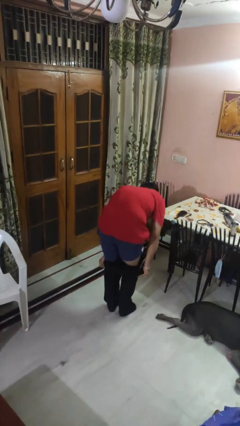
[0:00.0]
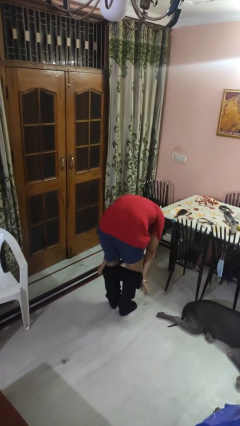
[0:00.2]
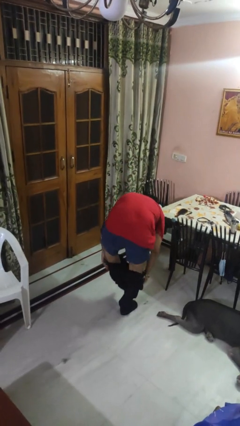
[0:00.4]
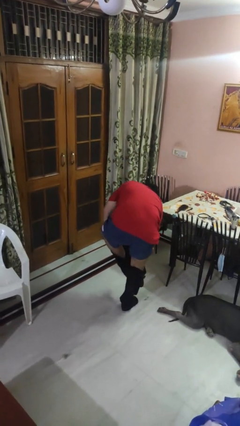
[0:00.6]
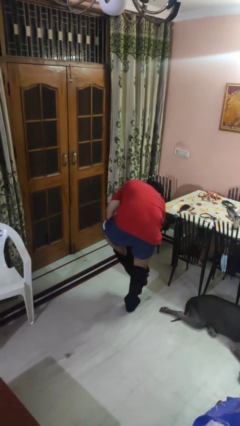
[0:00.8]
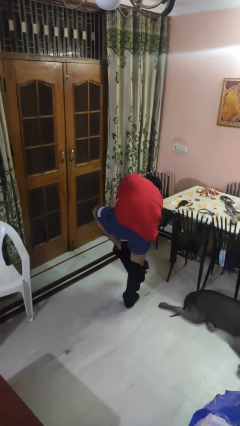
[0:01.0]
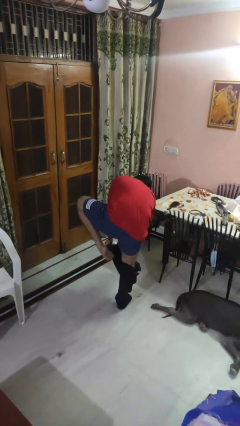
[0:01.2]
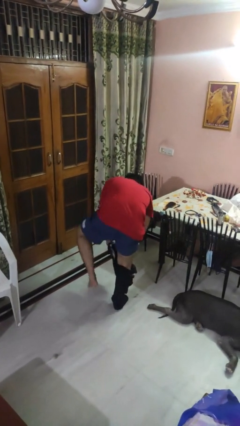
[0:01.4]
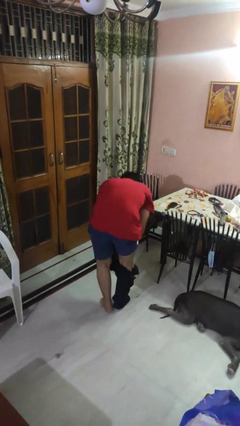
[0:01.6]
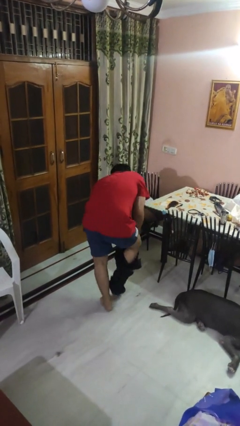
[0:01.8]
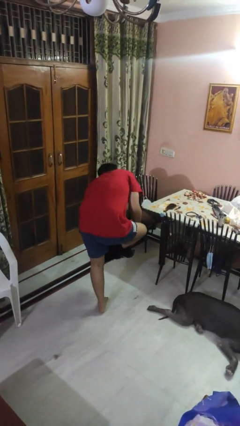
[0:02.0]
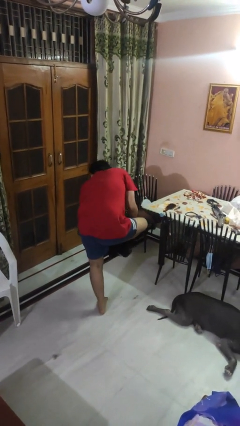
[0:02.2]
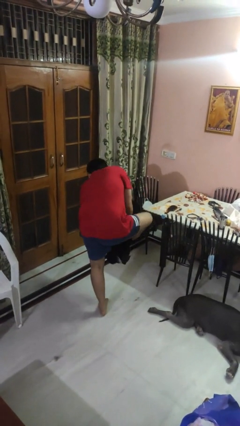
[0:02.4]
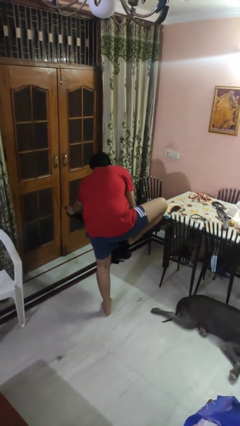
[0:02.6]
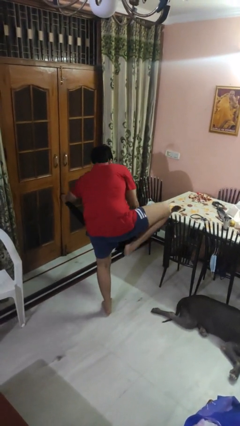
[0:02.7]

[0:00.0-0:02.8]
person takes off pants

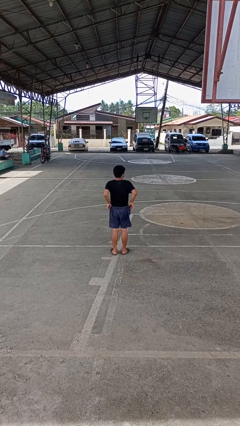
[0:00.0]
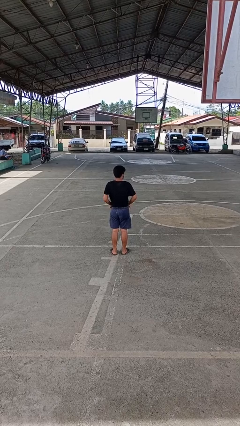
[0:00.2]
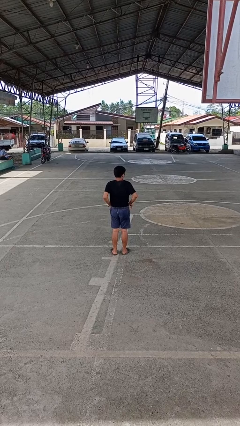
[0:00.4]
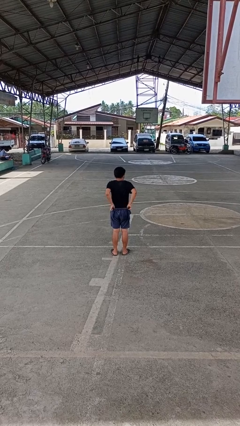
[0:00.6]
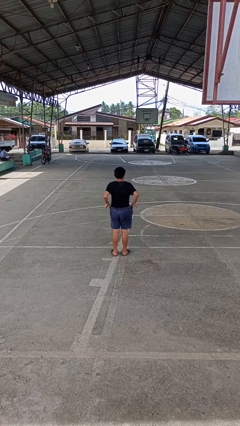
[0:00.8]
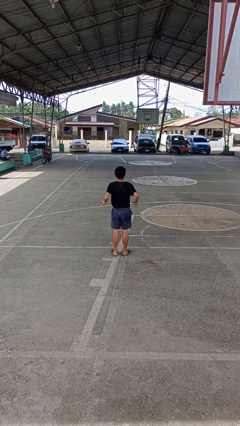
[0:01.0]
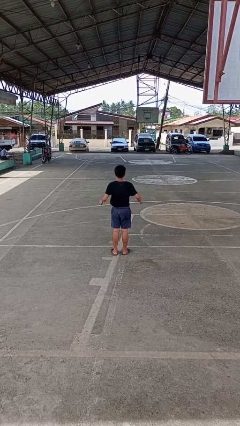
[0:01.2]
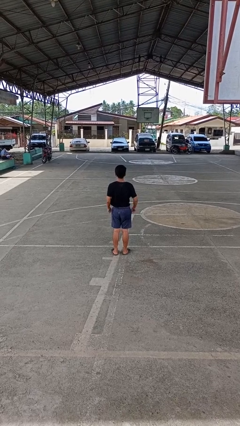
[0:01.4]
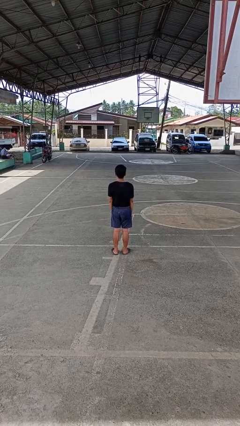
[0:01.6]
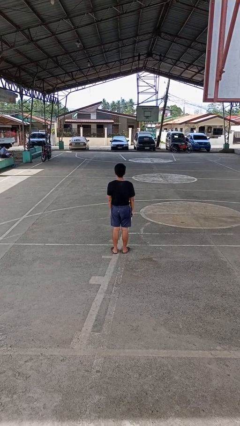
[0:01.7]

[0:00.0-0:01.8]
person hikes up pants

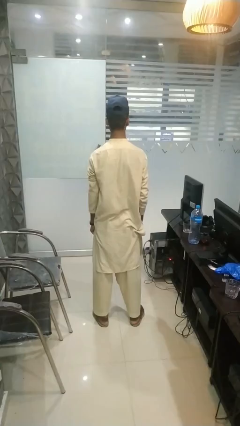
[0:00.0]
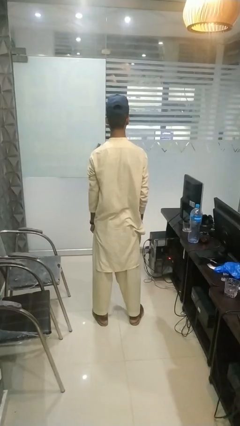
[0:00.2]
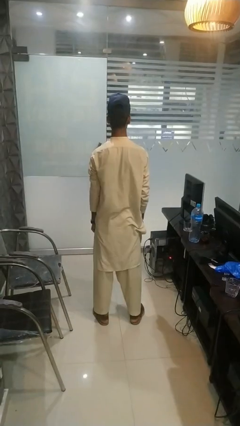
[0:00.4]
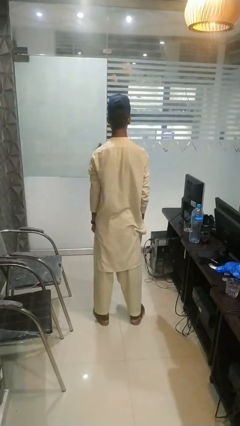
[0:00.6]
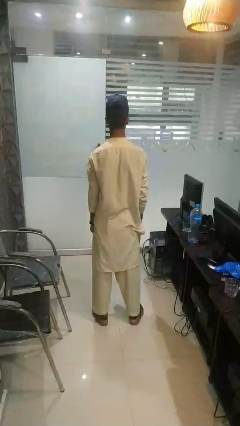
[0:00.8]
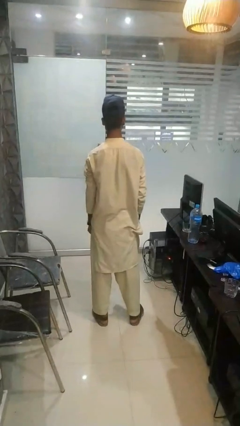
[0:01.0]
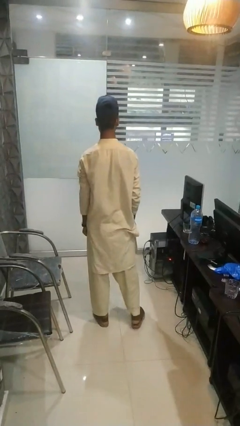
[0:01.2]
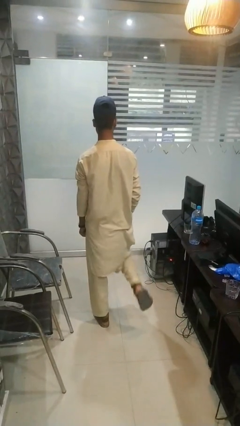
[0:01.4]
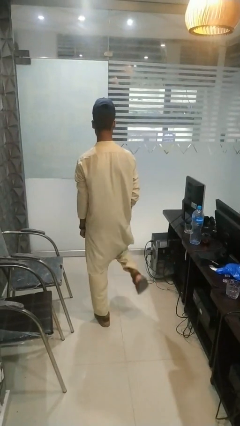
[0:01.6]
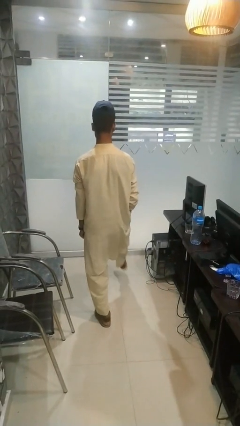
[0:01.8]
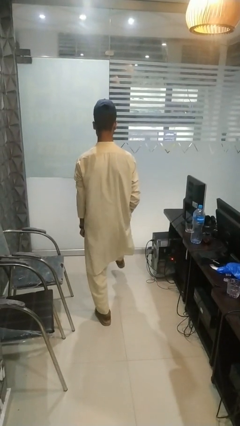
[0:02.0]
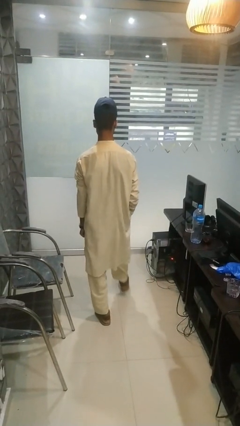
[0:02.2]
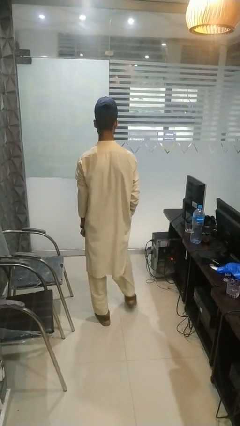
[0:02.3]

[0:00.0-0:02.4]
person karate kicks

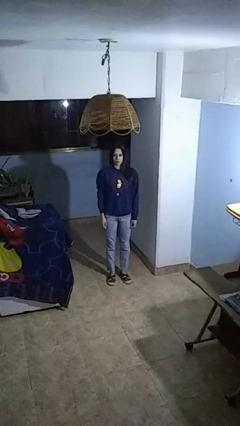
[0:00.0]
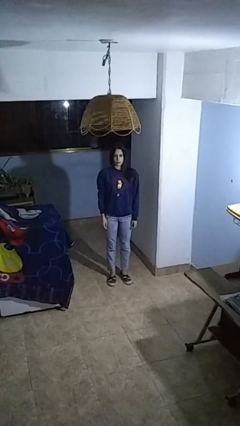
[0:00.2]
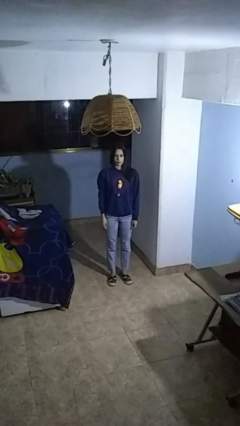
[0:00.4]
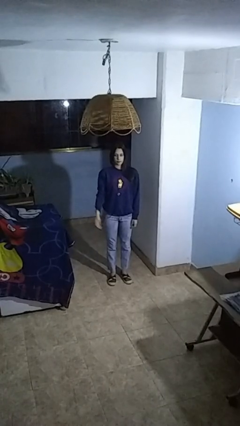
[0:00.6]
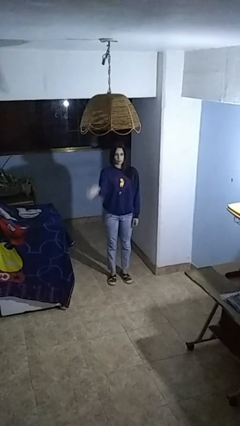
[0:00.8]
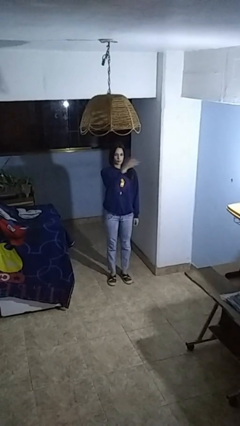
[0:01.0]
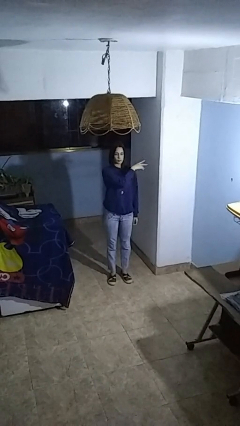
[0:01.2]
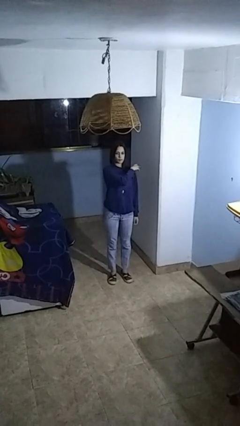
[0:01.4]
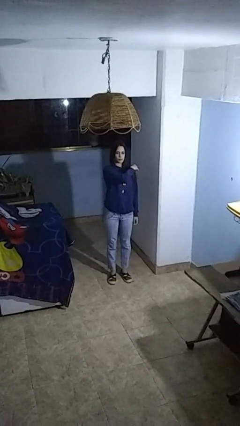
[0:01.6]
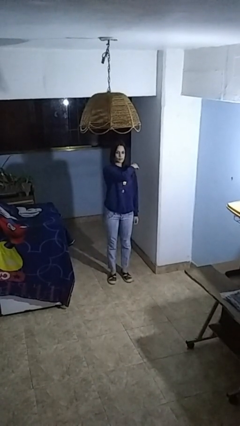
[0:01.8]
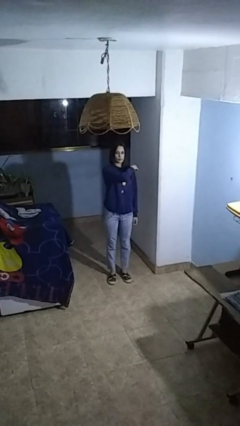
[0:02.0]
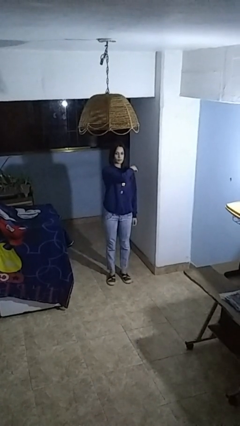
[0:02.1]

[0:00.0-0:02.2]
person gestures swipe left

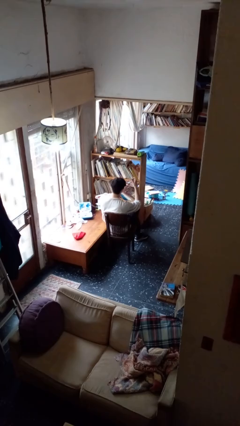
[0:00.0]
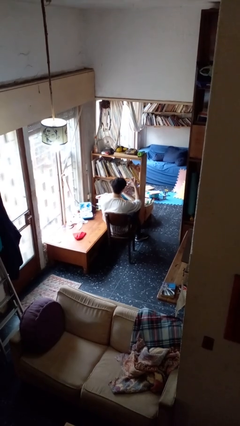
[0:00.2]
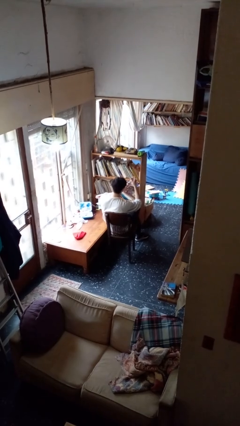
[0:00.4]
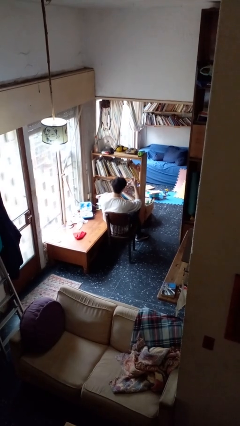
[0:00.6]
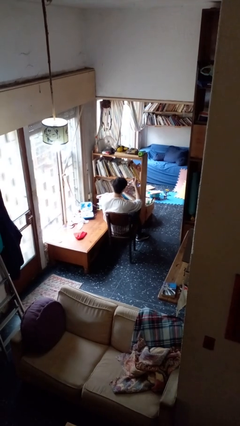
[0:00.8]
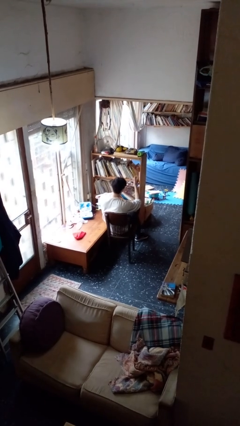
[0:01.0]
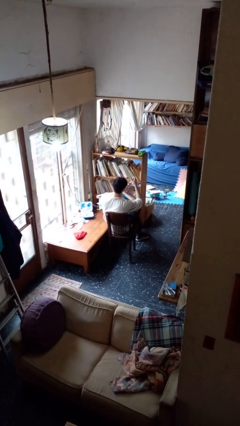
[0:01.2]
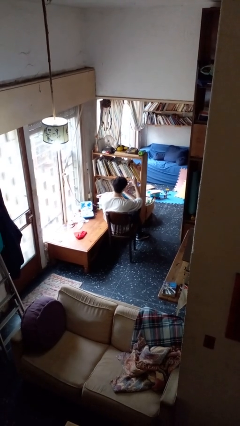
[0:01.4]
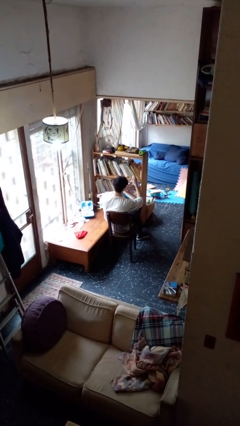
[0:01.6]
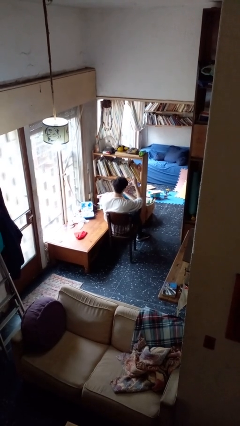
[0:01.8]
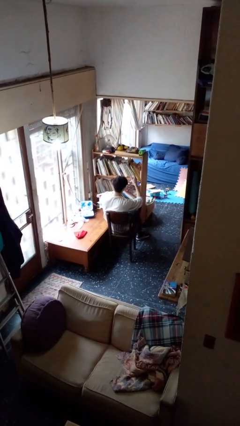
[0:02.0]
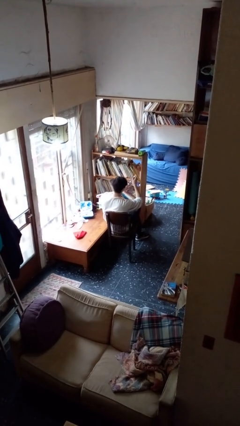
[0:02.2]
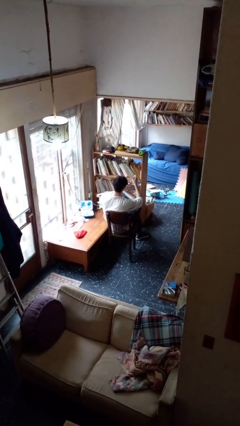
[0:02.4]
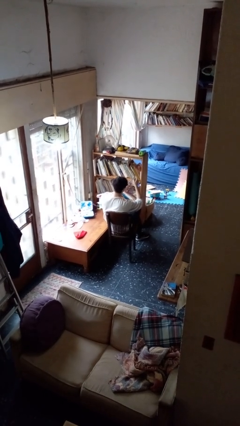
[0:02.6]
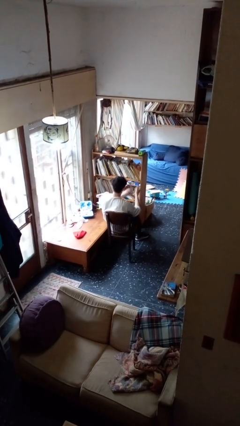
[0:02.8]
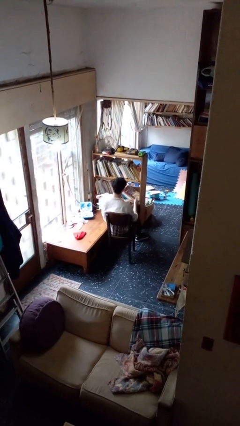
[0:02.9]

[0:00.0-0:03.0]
person clips fingernails

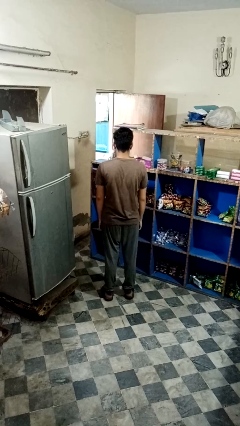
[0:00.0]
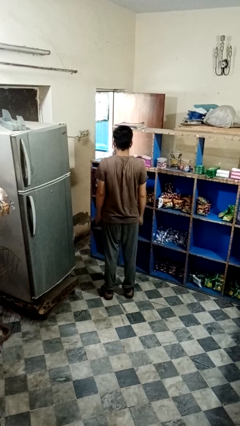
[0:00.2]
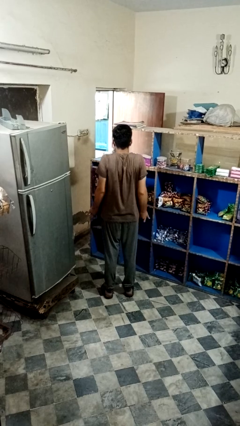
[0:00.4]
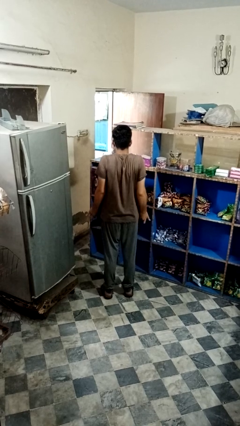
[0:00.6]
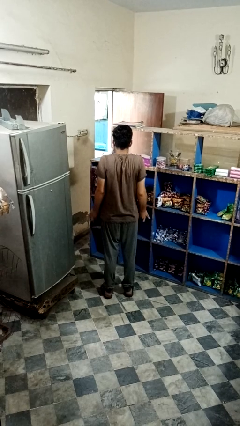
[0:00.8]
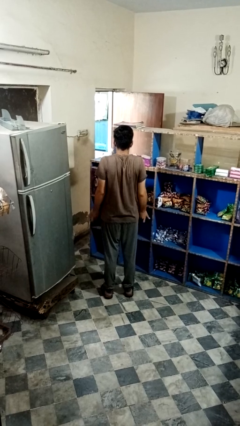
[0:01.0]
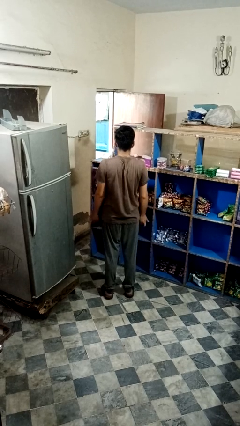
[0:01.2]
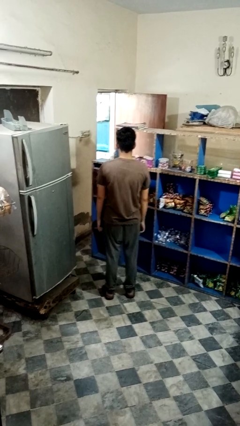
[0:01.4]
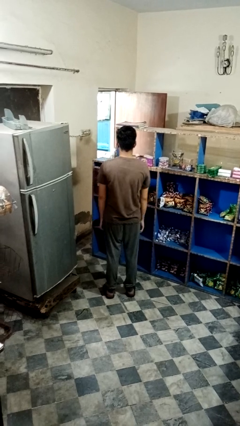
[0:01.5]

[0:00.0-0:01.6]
person shrugs

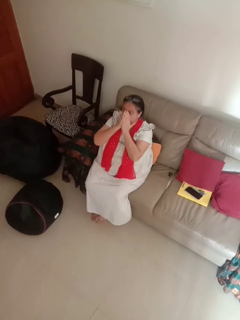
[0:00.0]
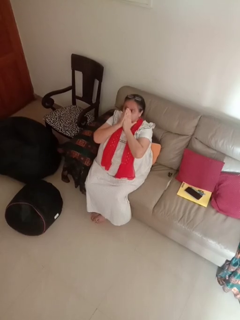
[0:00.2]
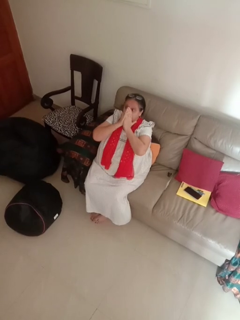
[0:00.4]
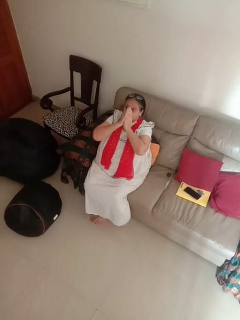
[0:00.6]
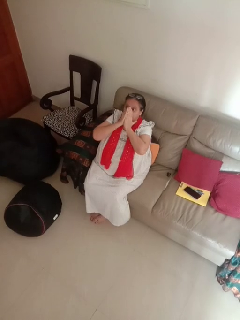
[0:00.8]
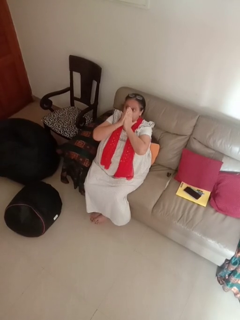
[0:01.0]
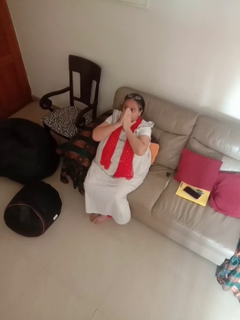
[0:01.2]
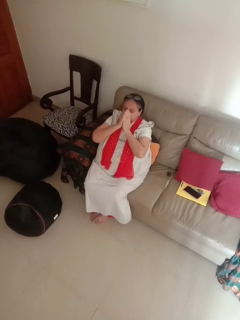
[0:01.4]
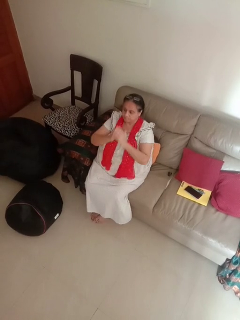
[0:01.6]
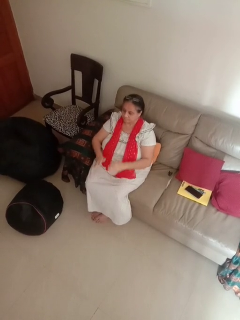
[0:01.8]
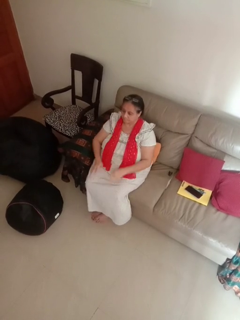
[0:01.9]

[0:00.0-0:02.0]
person covers face with hands

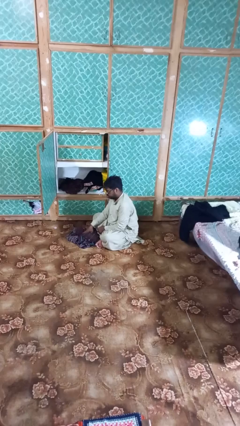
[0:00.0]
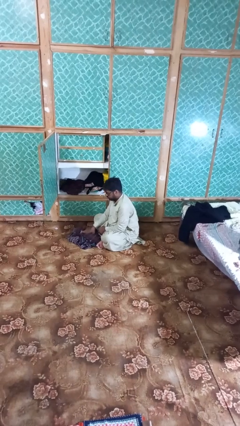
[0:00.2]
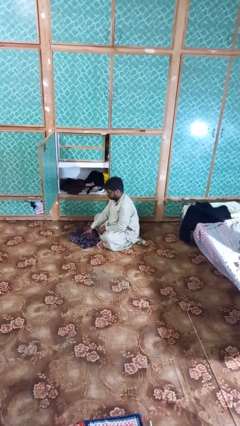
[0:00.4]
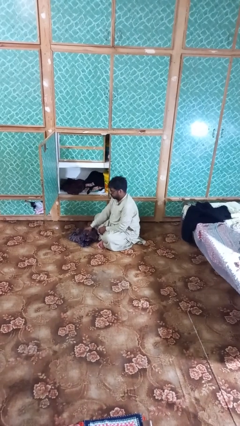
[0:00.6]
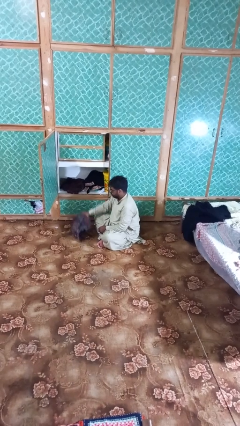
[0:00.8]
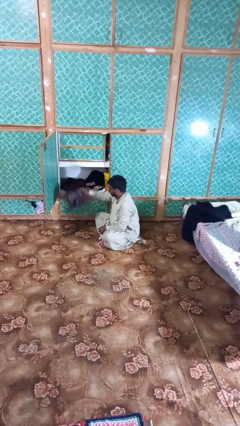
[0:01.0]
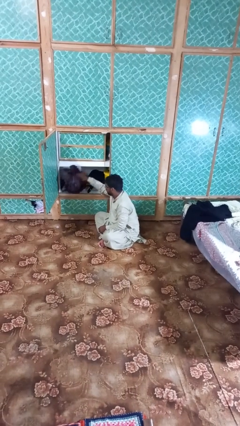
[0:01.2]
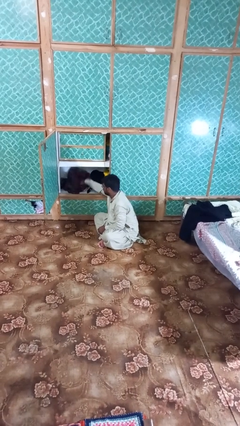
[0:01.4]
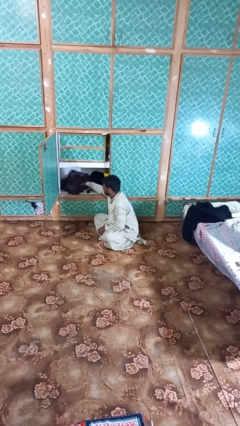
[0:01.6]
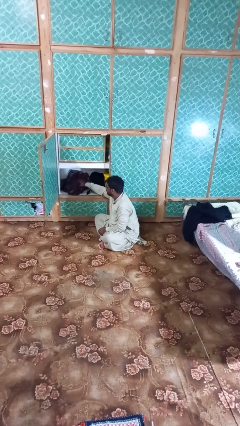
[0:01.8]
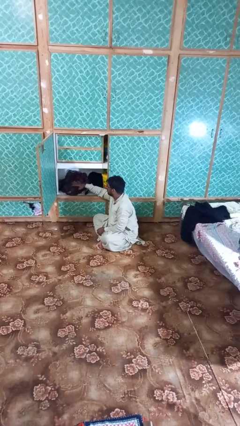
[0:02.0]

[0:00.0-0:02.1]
person puts clothes into dresser
